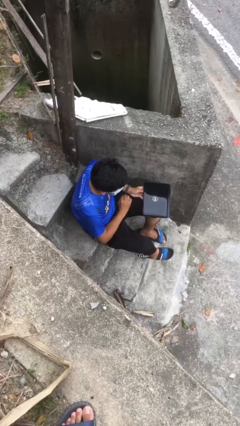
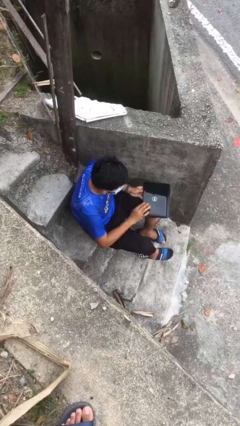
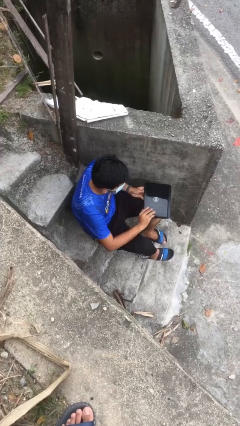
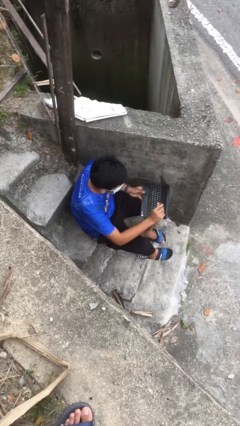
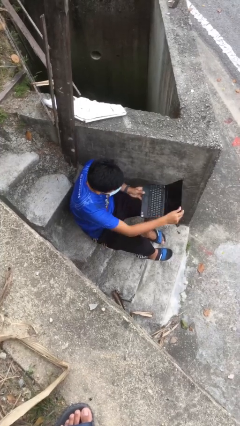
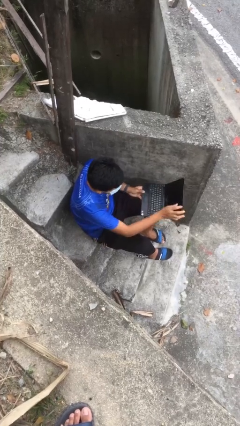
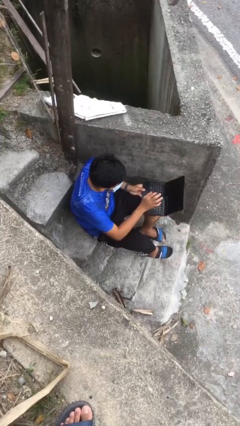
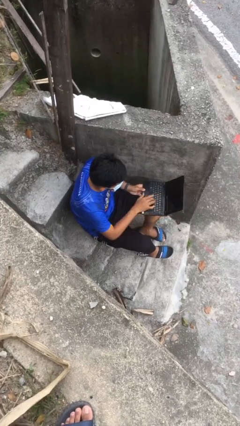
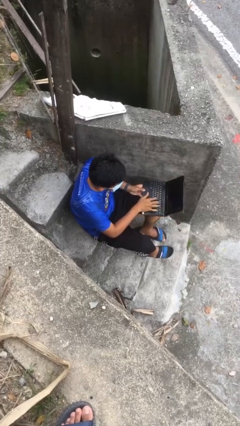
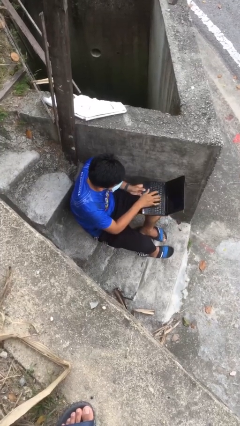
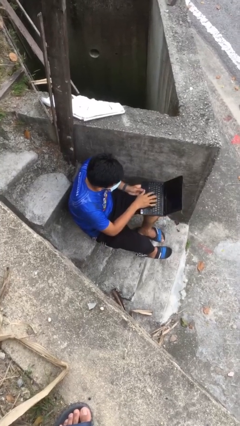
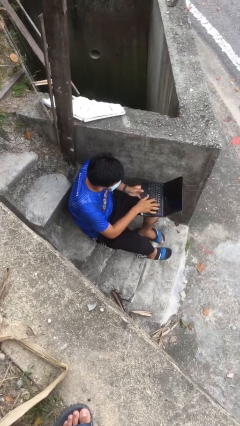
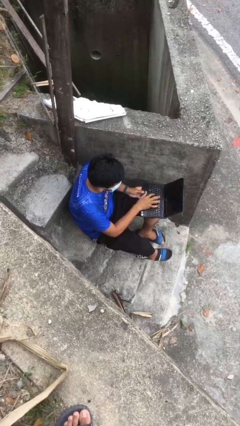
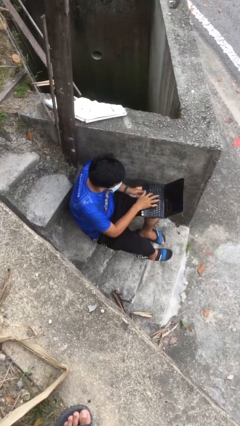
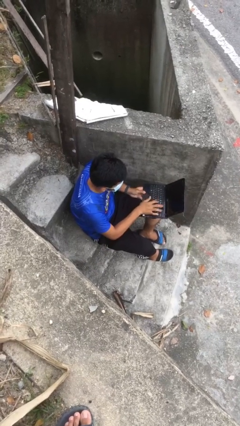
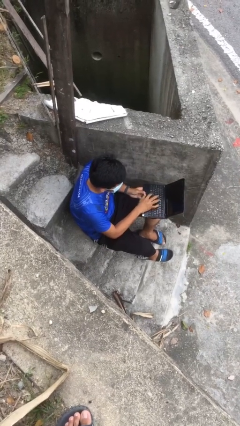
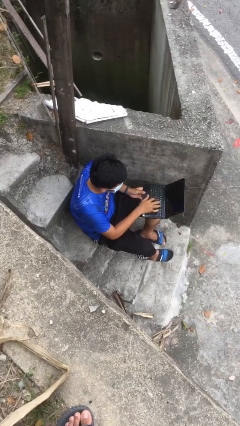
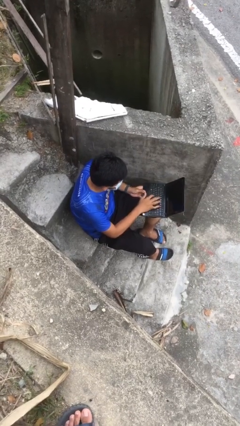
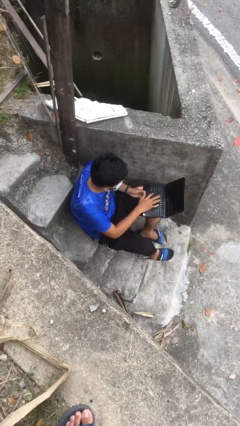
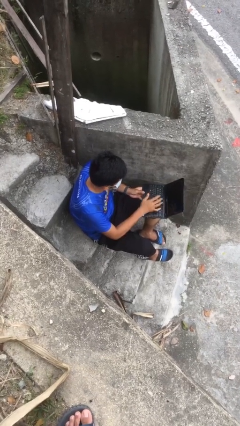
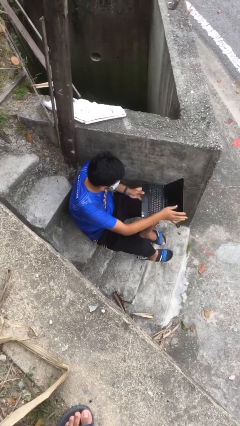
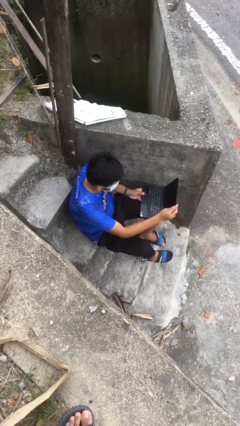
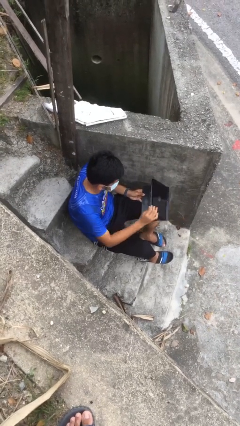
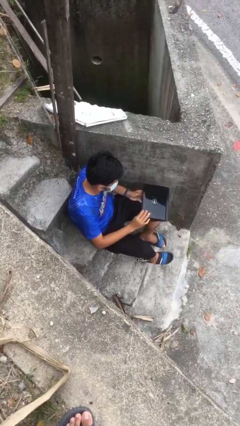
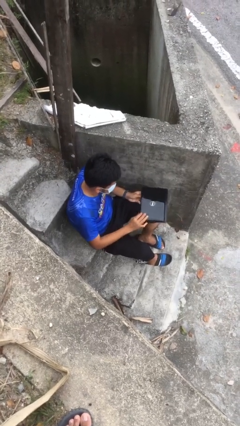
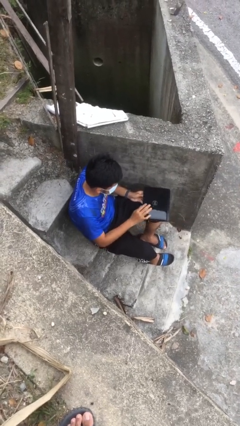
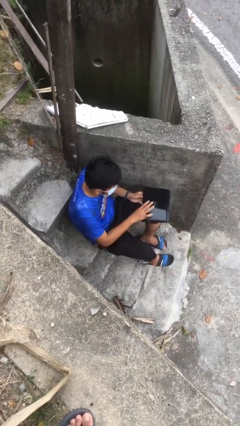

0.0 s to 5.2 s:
person interacts with laptop

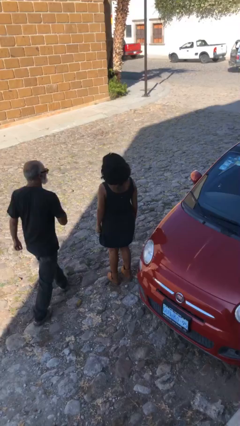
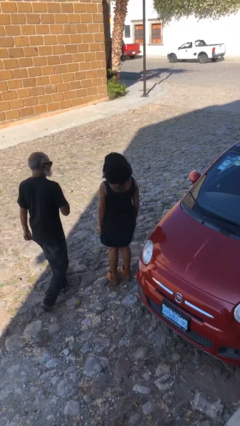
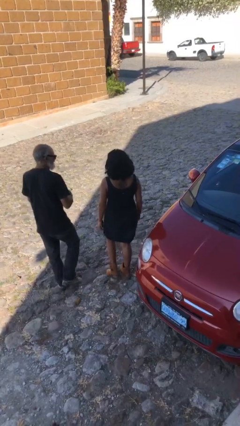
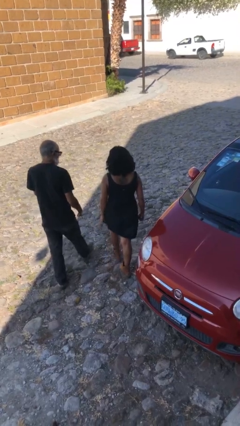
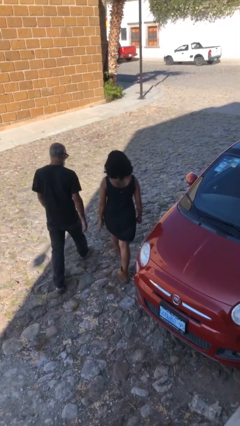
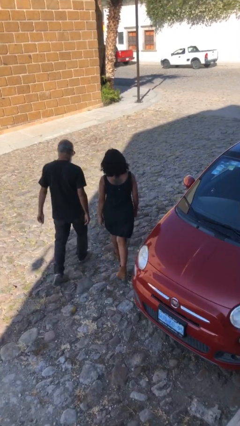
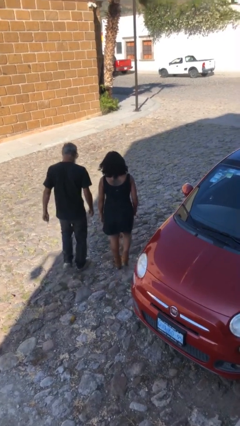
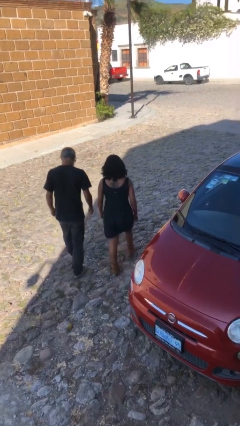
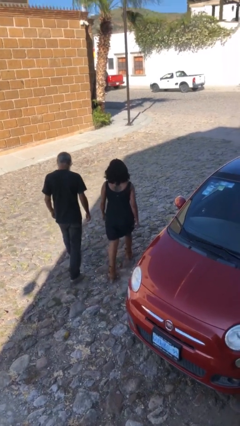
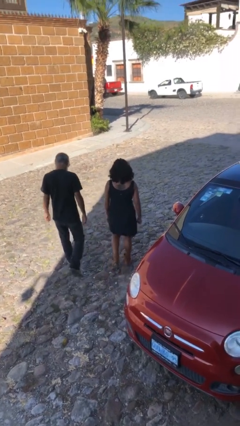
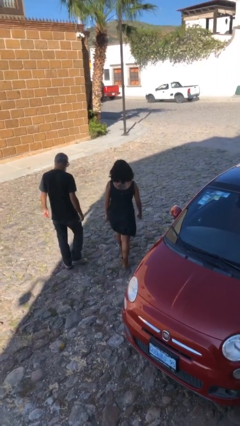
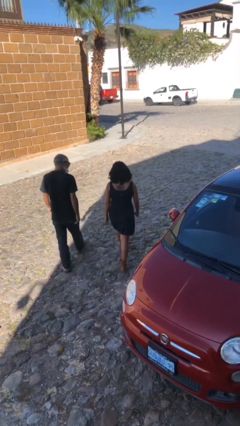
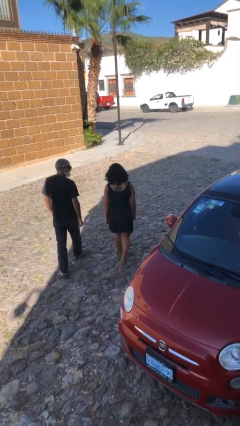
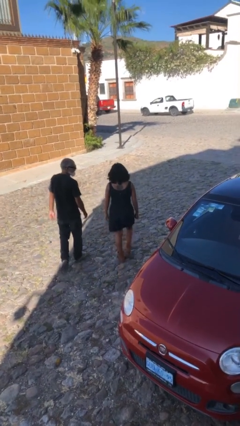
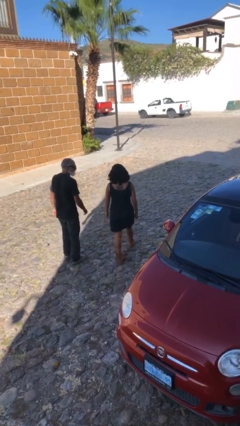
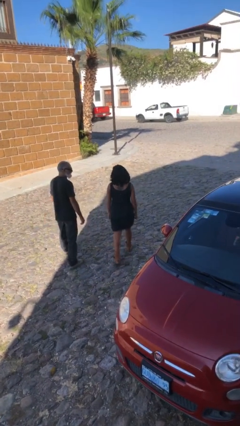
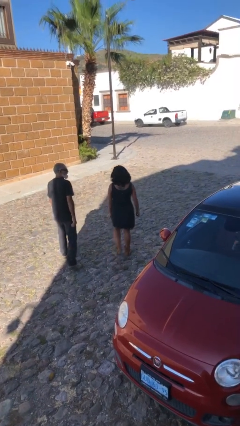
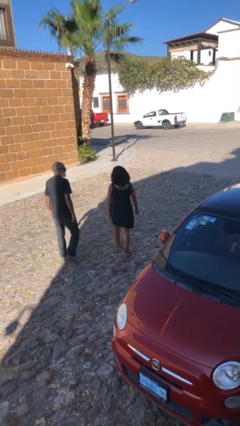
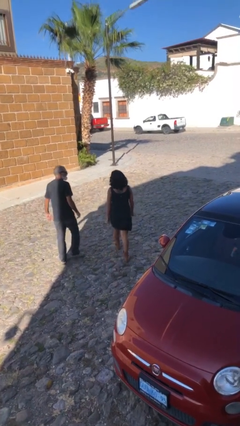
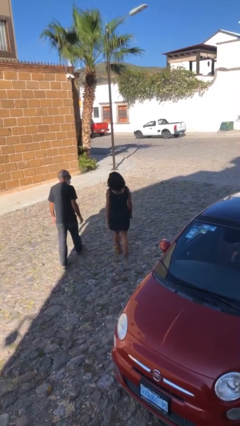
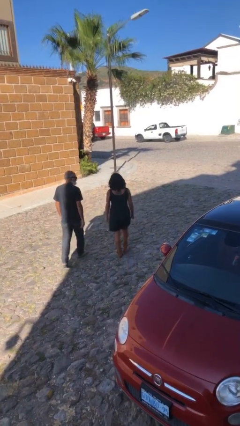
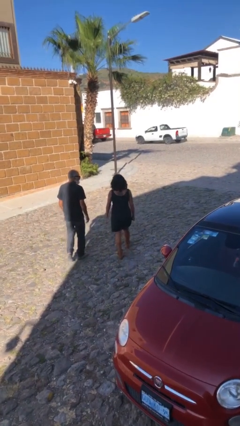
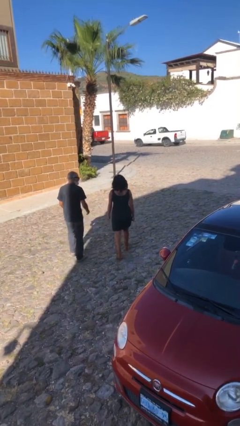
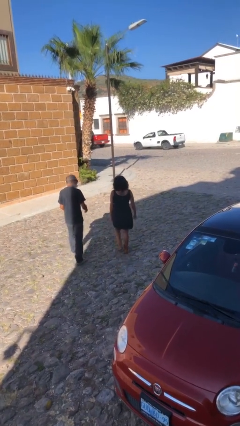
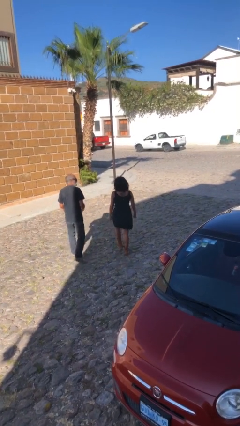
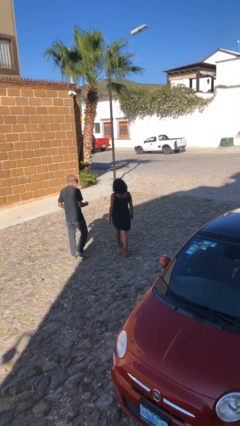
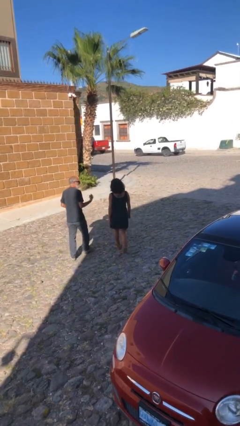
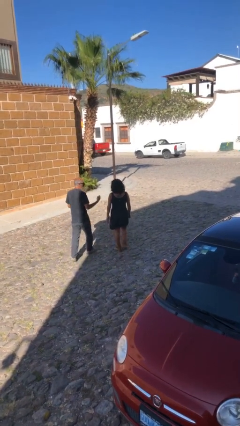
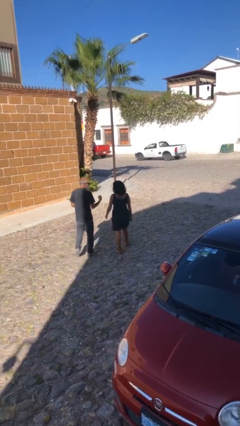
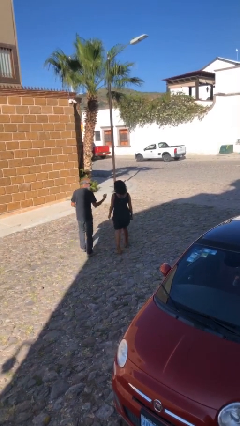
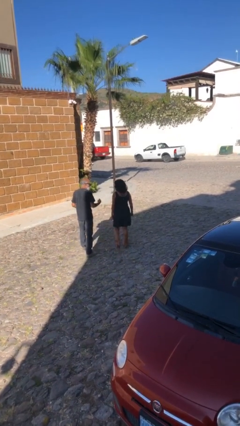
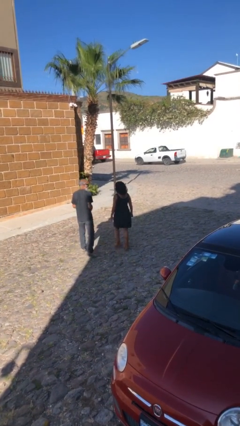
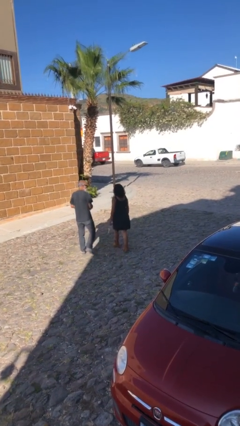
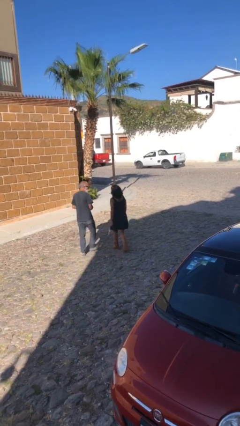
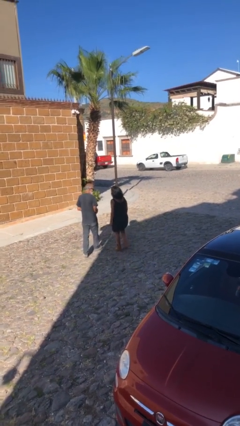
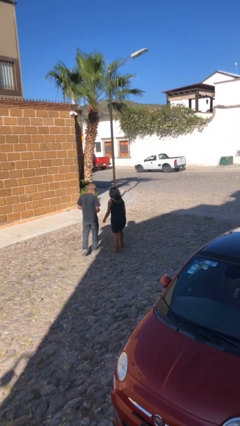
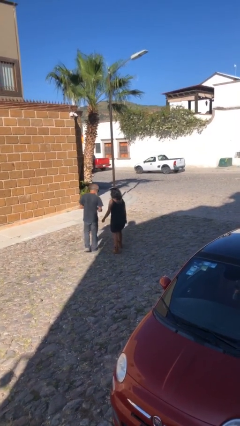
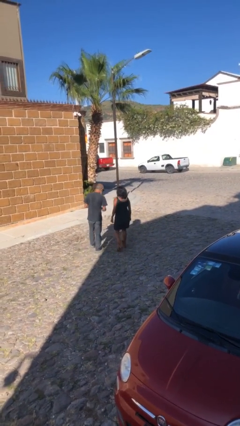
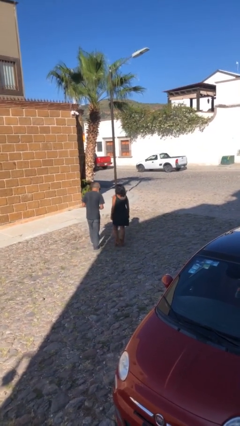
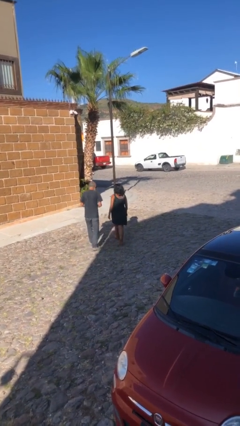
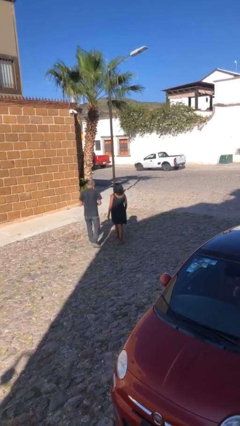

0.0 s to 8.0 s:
person talks to person

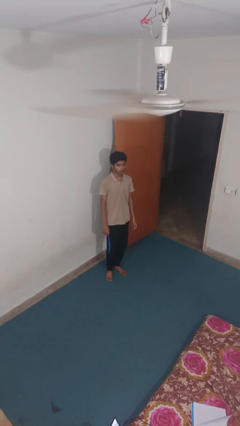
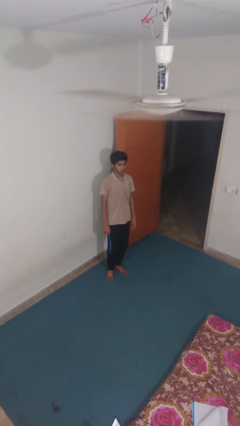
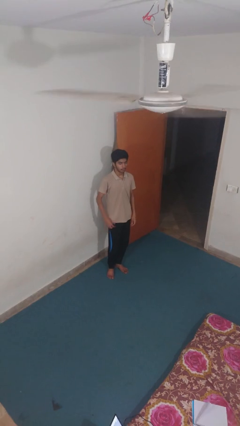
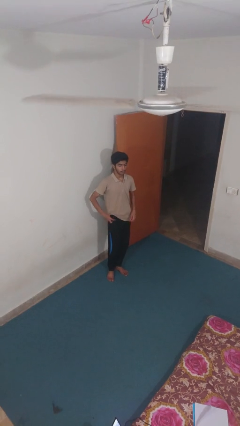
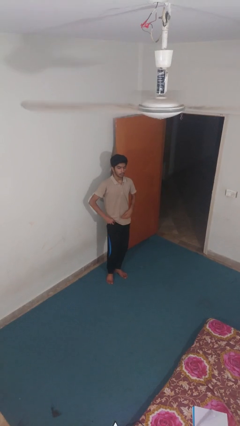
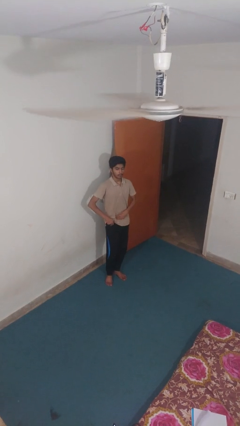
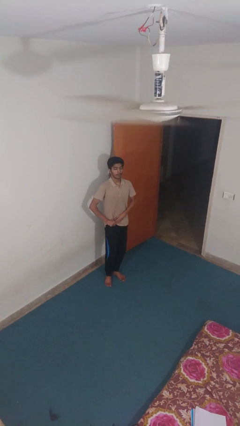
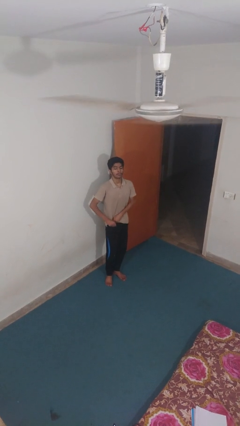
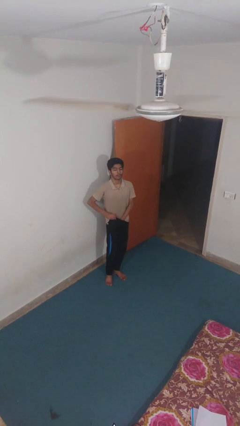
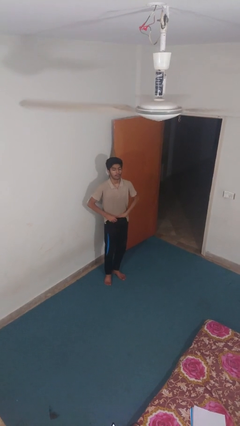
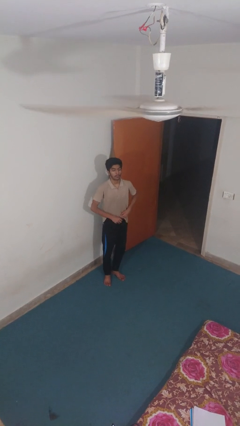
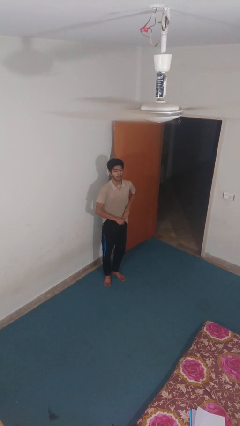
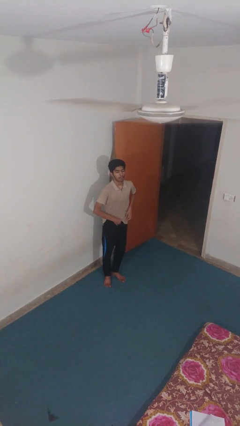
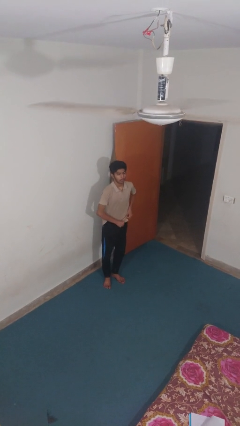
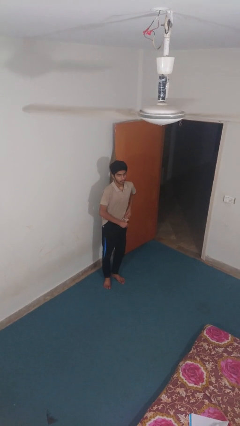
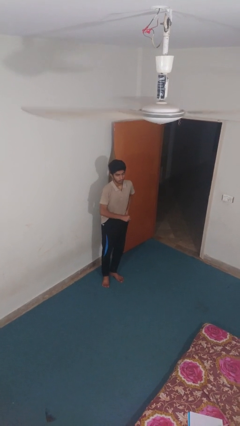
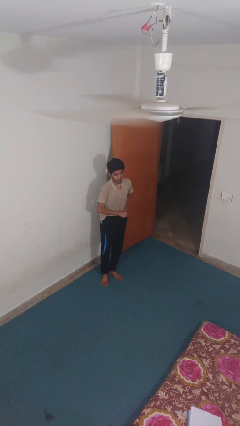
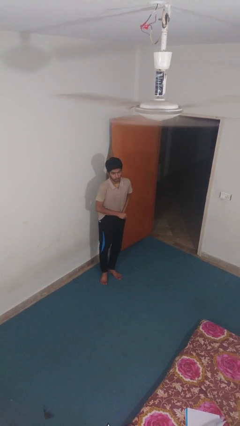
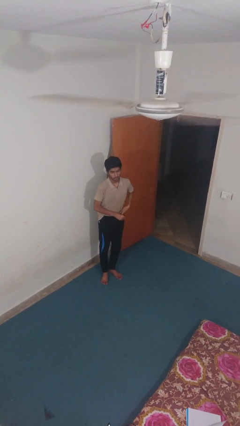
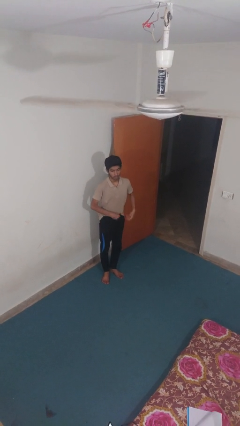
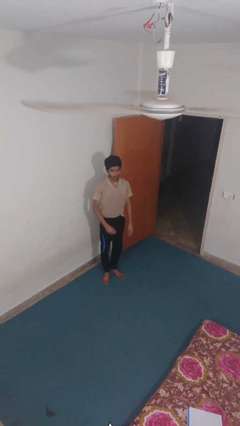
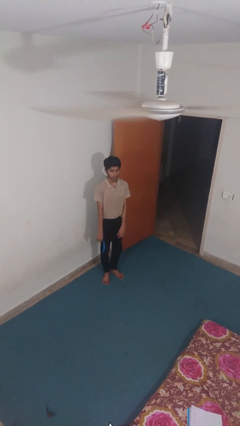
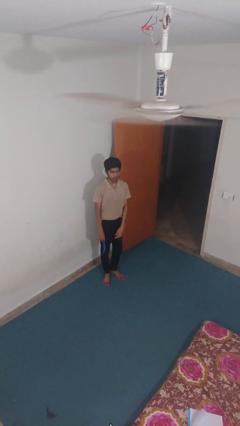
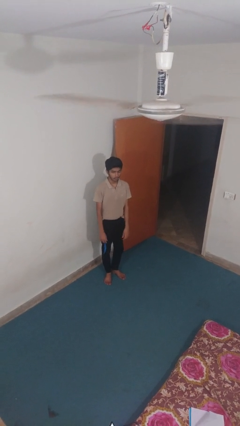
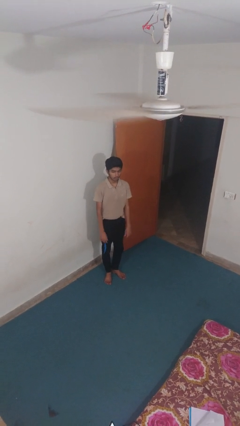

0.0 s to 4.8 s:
person tucks in shirt
